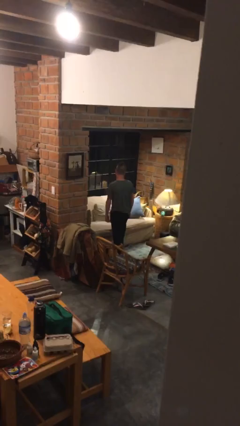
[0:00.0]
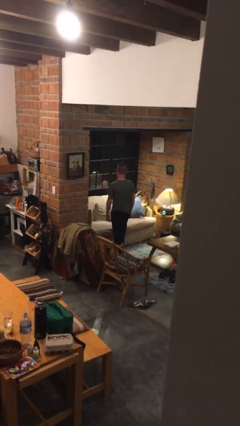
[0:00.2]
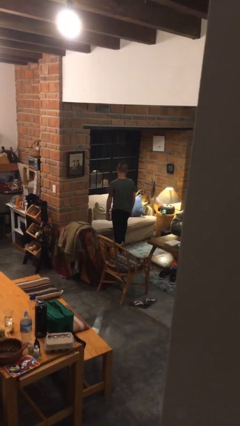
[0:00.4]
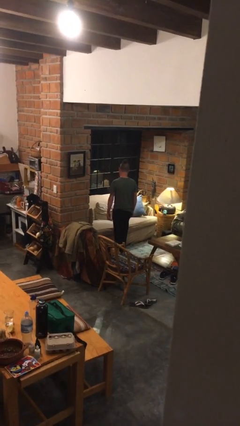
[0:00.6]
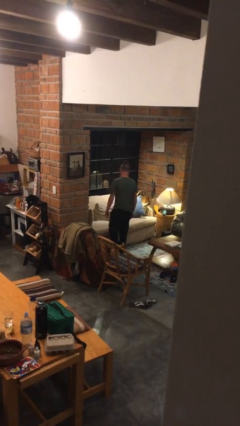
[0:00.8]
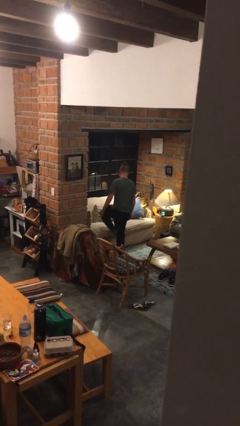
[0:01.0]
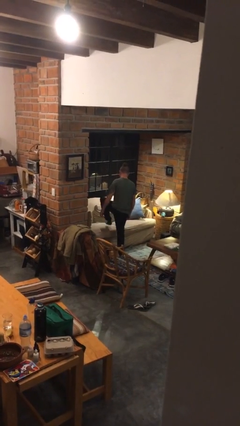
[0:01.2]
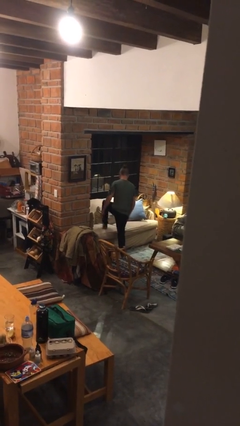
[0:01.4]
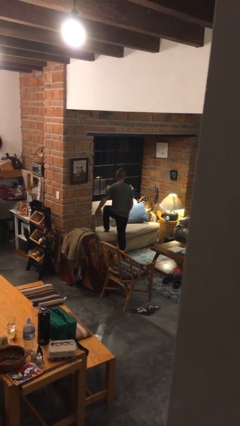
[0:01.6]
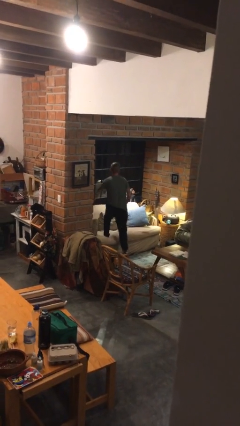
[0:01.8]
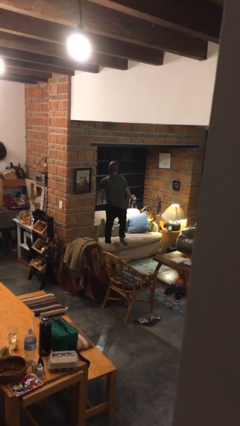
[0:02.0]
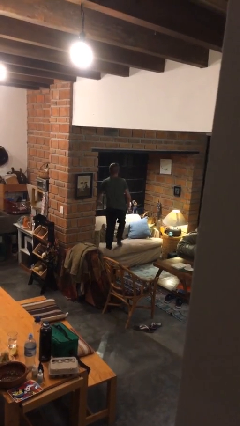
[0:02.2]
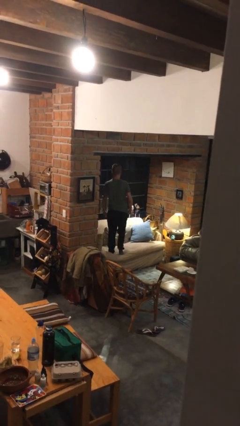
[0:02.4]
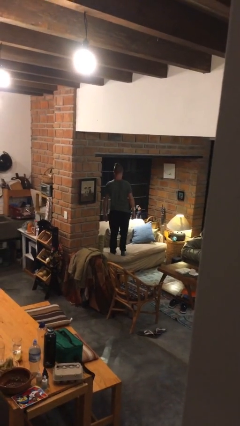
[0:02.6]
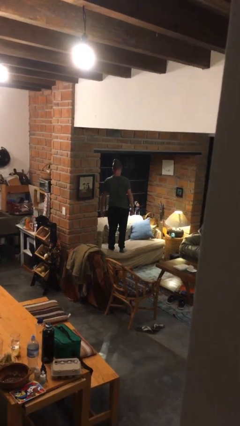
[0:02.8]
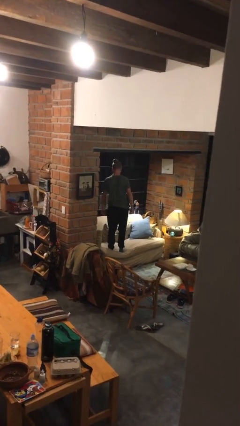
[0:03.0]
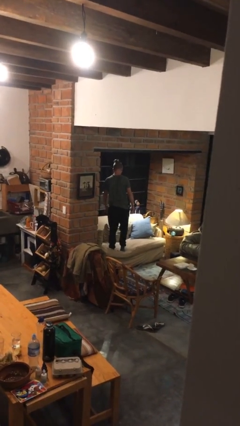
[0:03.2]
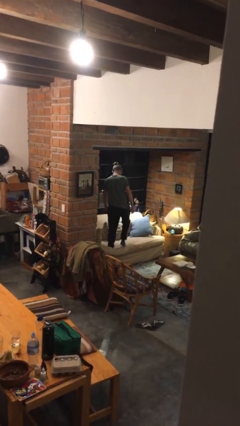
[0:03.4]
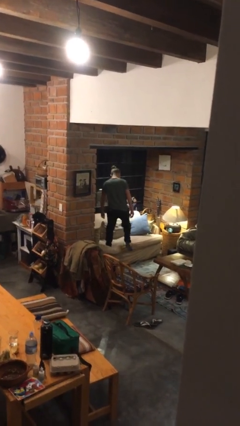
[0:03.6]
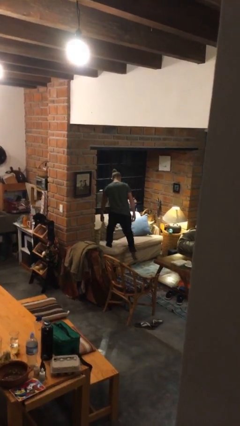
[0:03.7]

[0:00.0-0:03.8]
person climbs on couch

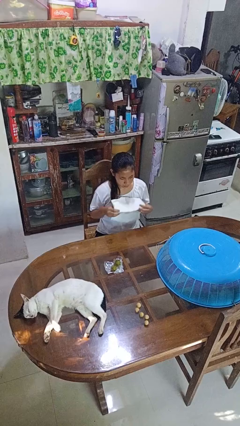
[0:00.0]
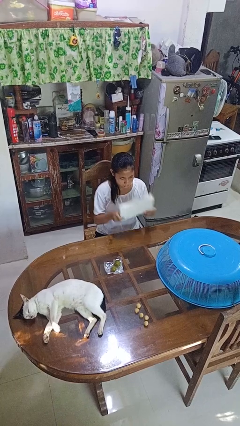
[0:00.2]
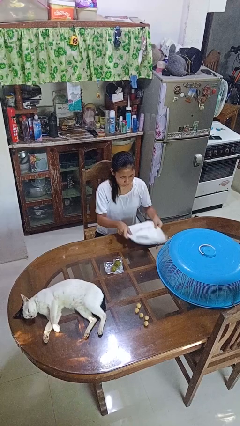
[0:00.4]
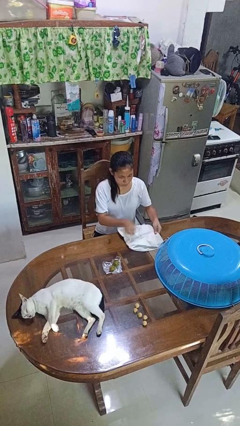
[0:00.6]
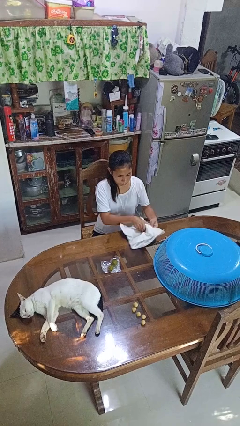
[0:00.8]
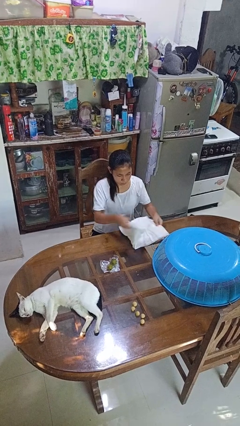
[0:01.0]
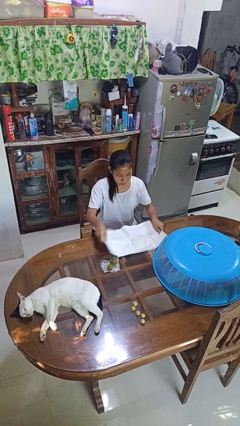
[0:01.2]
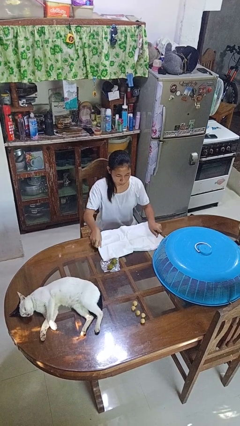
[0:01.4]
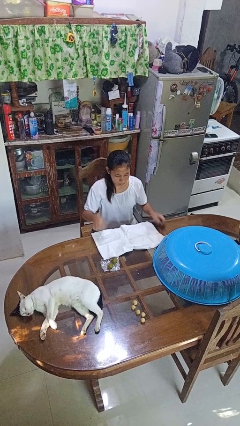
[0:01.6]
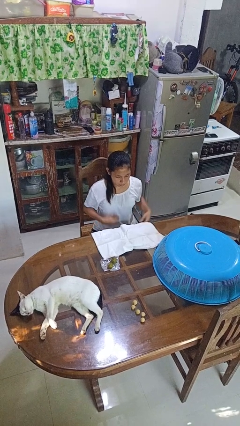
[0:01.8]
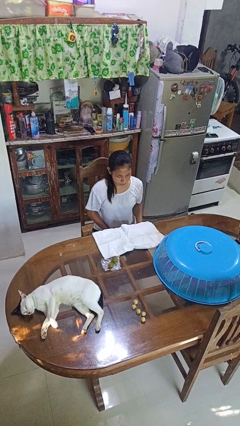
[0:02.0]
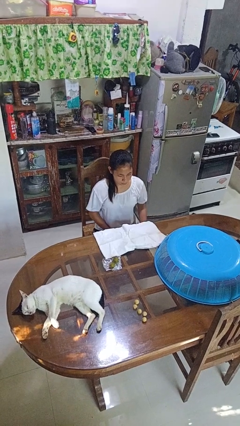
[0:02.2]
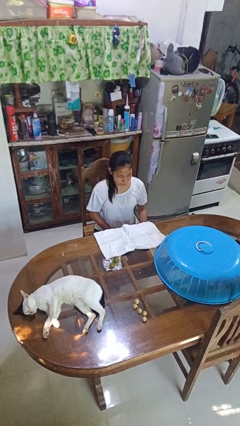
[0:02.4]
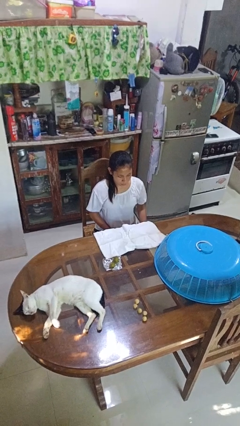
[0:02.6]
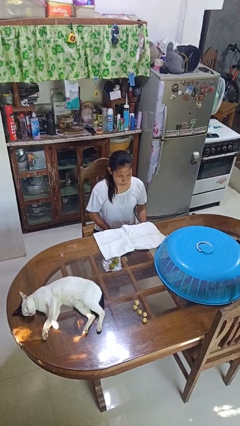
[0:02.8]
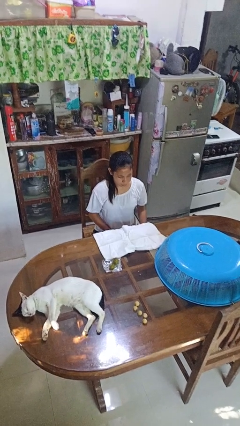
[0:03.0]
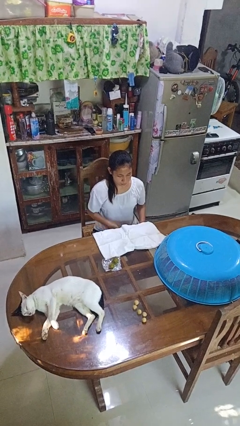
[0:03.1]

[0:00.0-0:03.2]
person spreads tablecloth

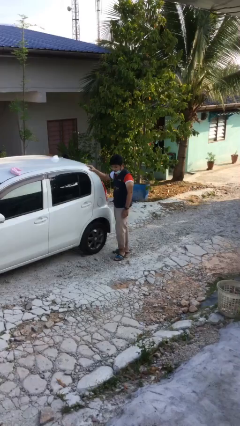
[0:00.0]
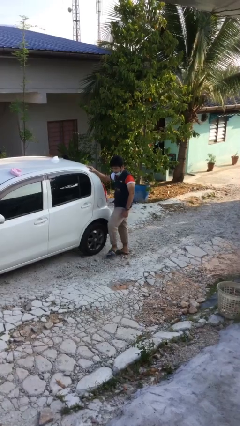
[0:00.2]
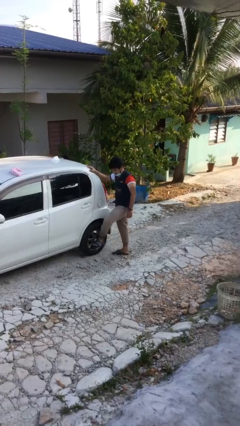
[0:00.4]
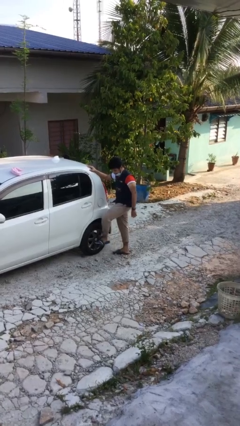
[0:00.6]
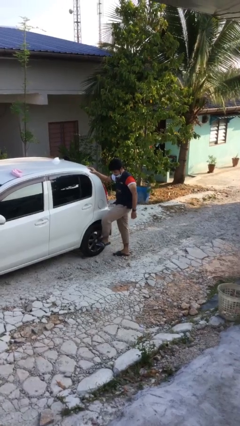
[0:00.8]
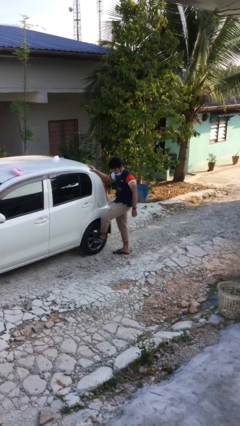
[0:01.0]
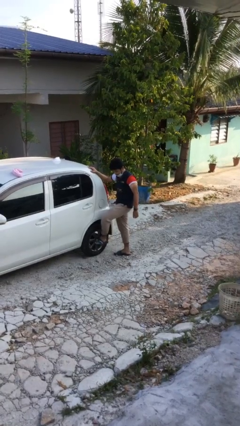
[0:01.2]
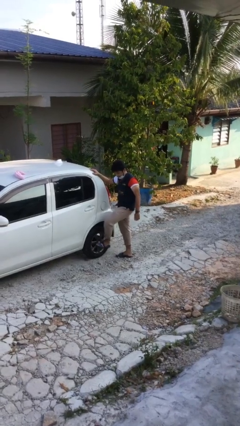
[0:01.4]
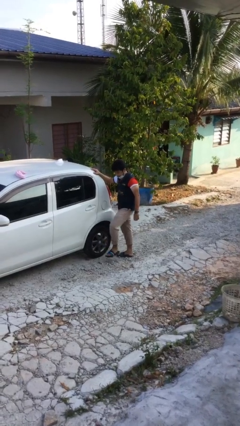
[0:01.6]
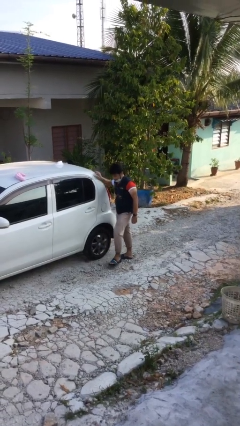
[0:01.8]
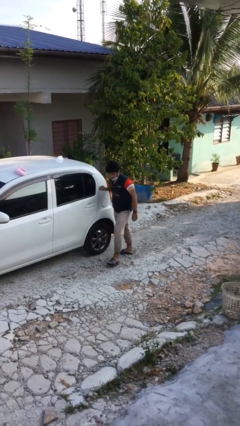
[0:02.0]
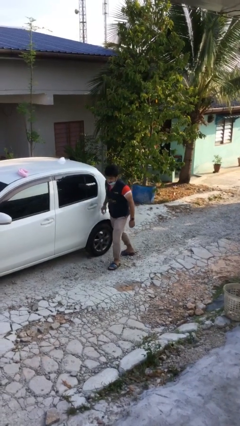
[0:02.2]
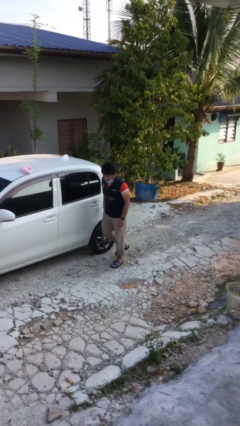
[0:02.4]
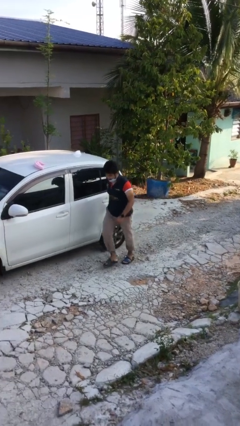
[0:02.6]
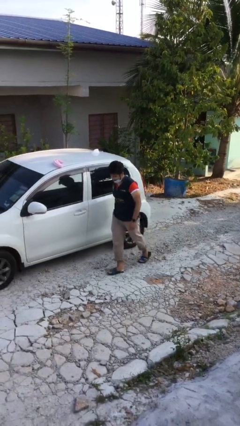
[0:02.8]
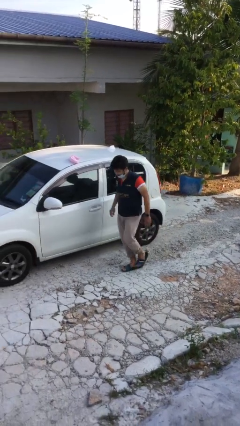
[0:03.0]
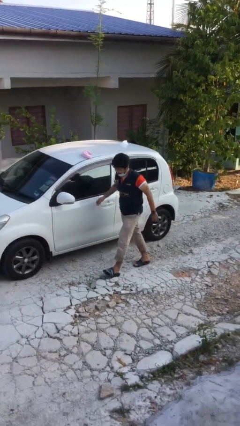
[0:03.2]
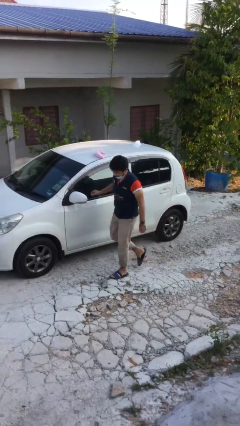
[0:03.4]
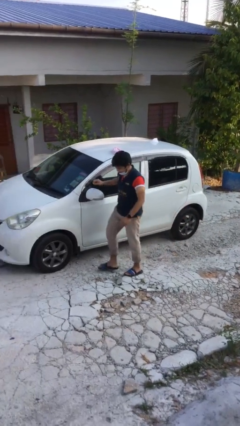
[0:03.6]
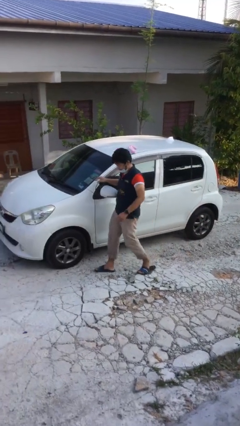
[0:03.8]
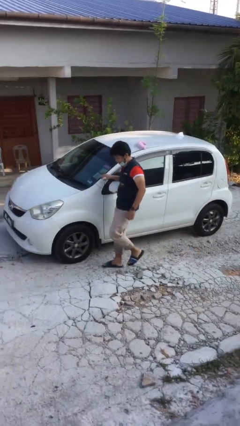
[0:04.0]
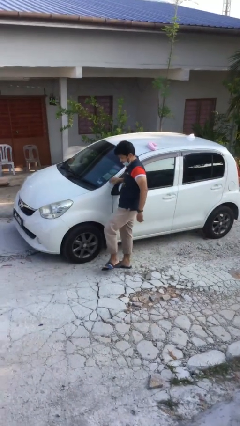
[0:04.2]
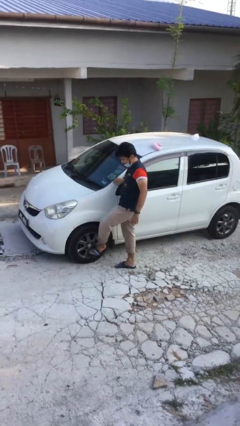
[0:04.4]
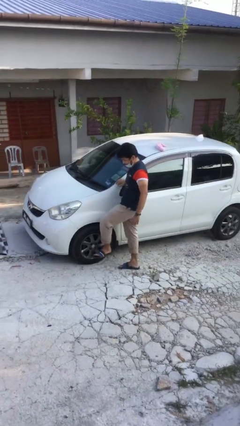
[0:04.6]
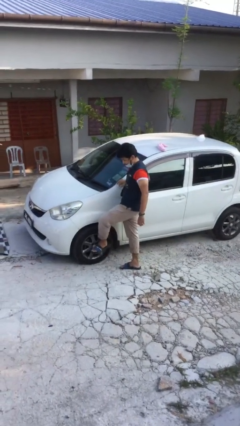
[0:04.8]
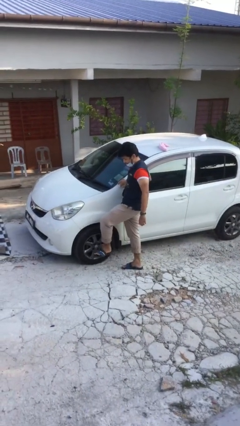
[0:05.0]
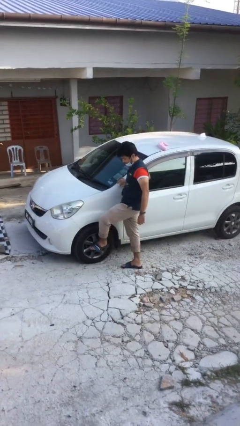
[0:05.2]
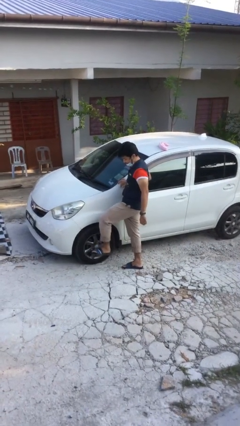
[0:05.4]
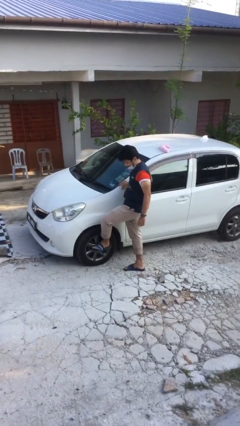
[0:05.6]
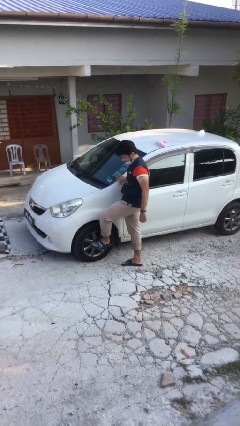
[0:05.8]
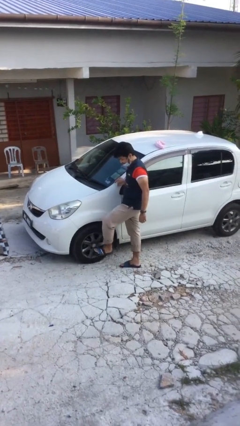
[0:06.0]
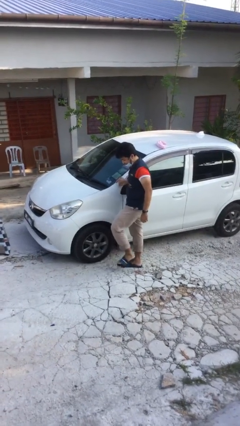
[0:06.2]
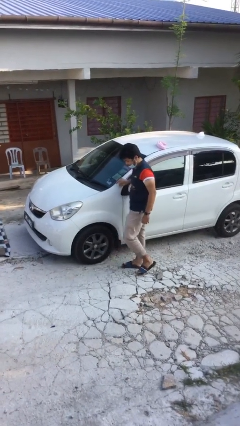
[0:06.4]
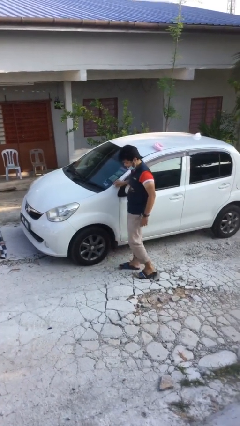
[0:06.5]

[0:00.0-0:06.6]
person kicks car tires

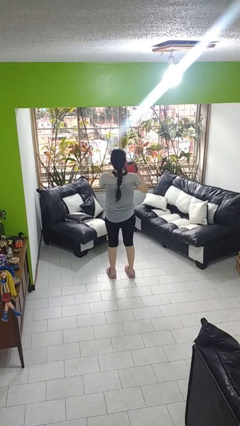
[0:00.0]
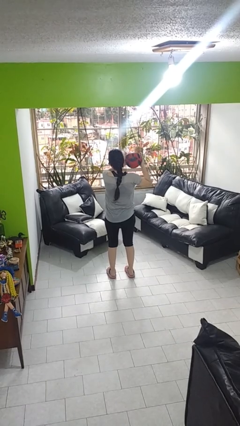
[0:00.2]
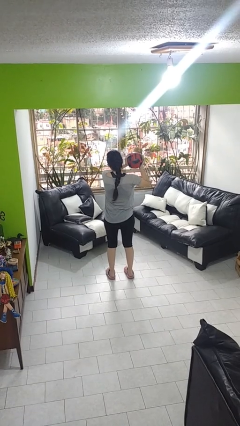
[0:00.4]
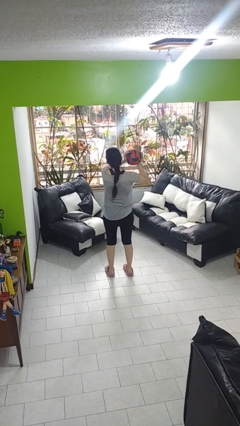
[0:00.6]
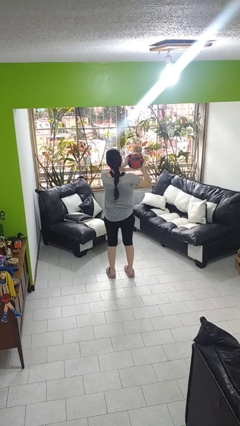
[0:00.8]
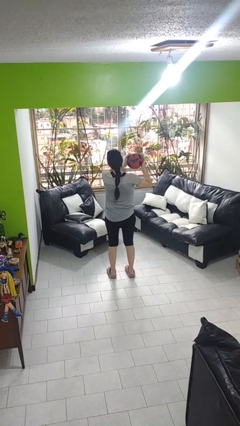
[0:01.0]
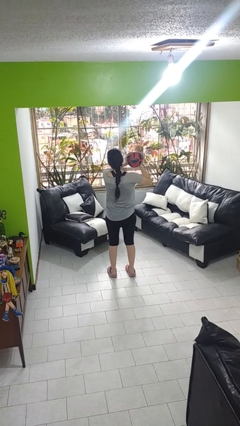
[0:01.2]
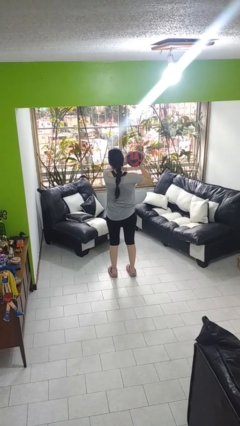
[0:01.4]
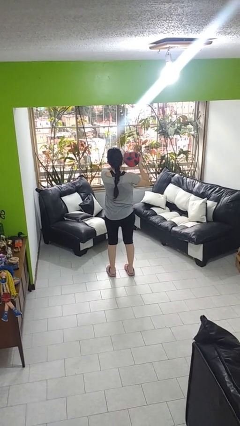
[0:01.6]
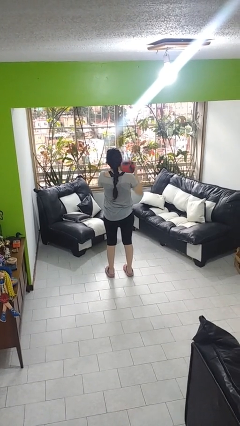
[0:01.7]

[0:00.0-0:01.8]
person squeezes object

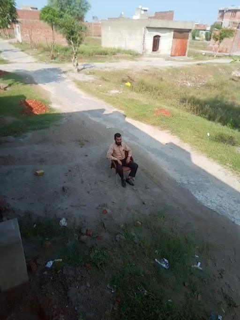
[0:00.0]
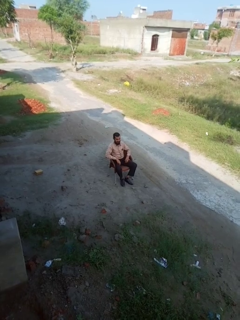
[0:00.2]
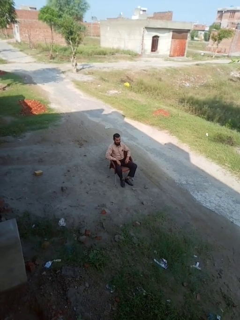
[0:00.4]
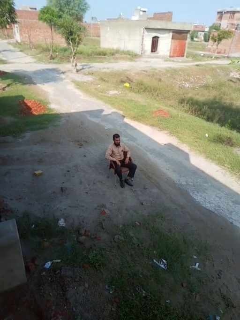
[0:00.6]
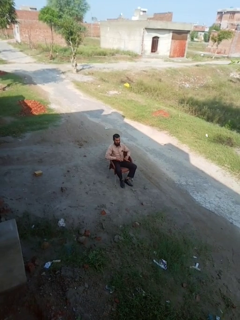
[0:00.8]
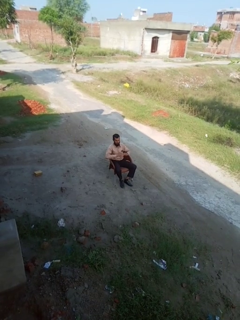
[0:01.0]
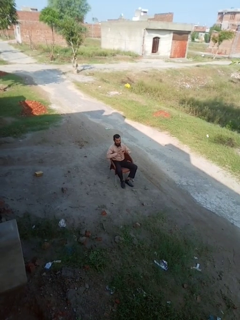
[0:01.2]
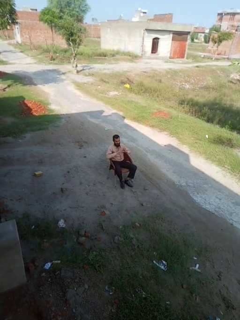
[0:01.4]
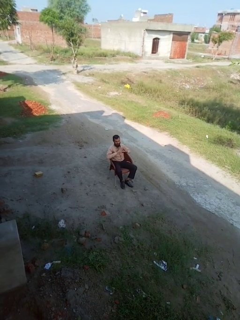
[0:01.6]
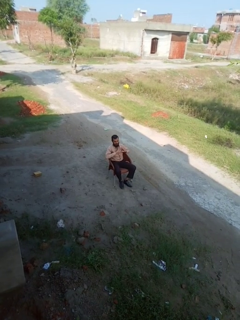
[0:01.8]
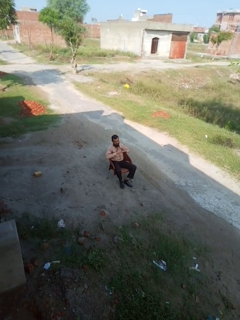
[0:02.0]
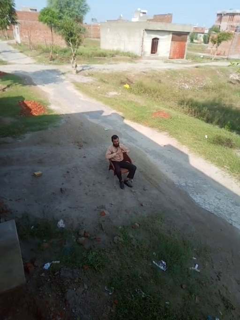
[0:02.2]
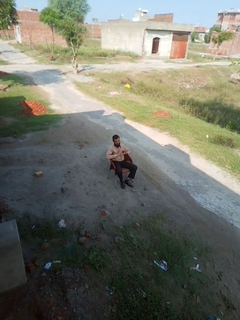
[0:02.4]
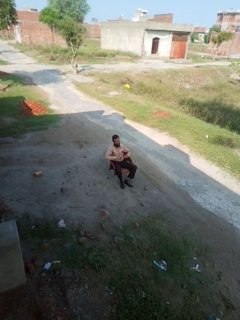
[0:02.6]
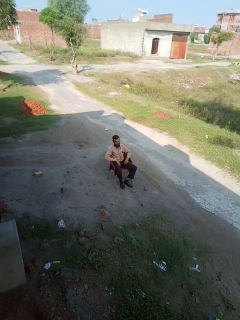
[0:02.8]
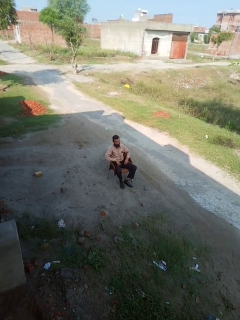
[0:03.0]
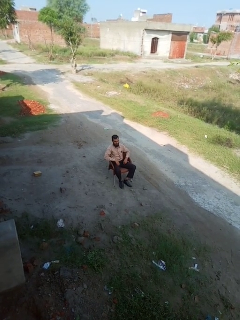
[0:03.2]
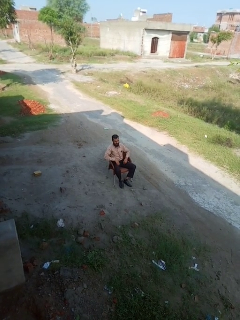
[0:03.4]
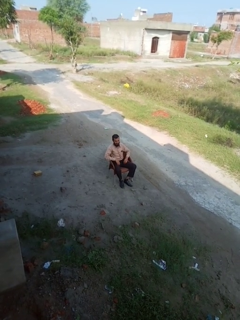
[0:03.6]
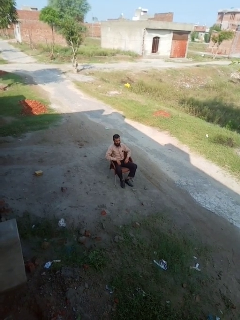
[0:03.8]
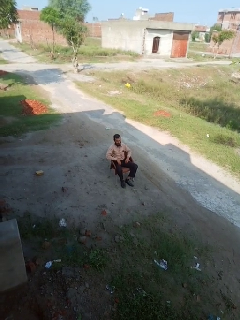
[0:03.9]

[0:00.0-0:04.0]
person gestures heart
